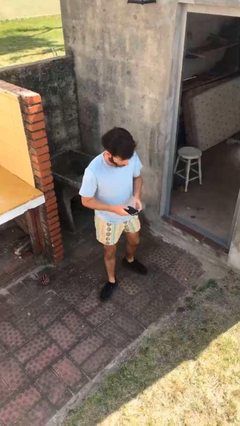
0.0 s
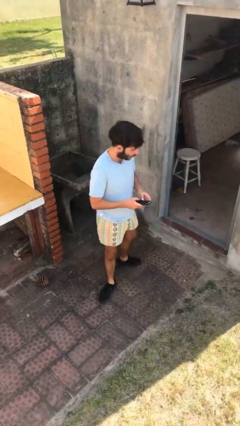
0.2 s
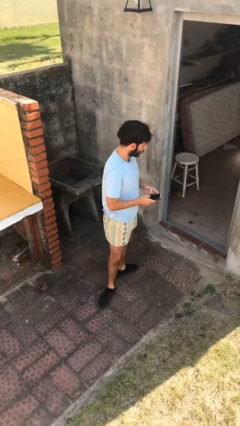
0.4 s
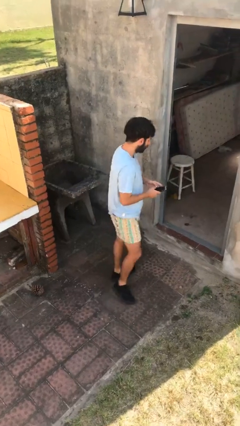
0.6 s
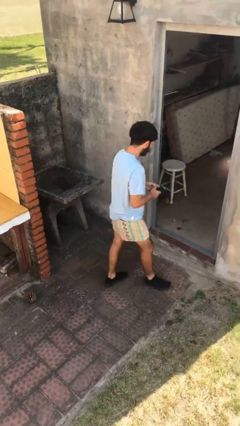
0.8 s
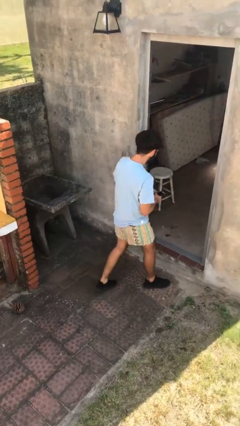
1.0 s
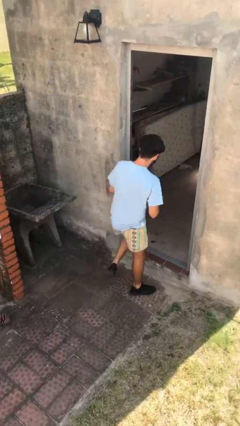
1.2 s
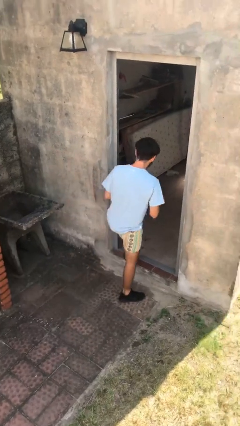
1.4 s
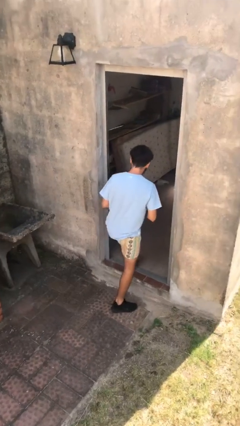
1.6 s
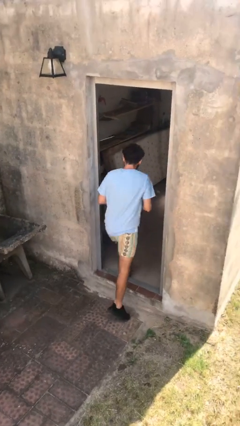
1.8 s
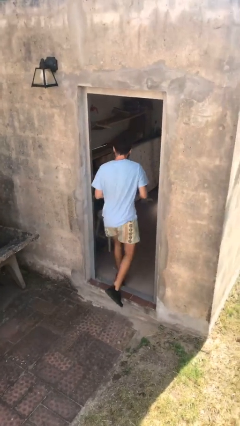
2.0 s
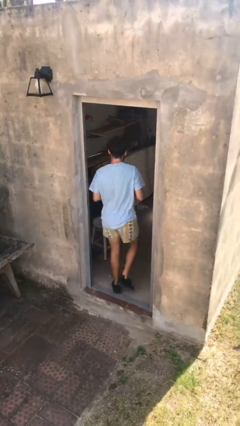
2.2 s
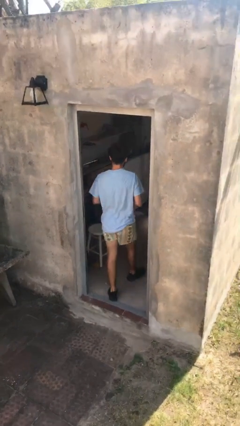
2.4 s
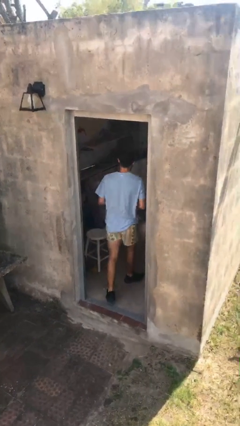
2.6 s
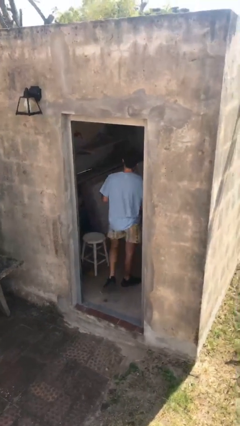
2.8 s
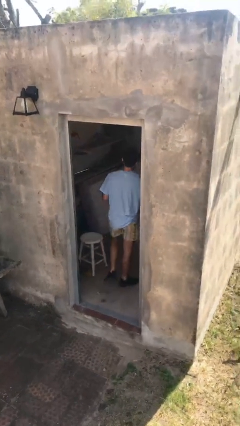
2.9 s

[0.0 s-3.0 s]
person exits scene through structure

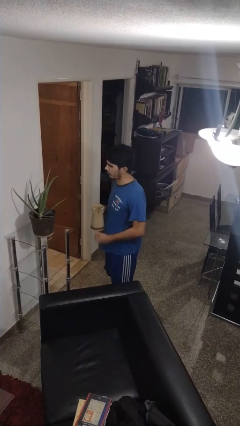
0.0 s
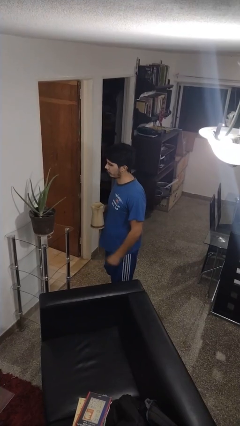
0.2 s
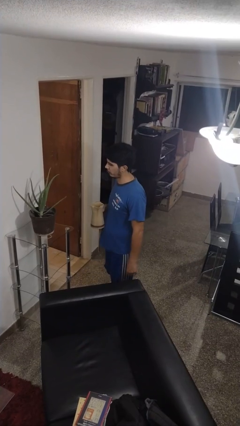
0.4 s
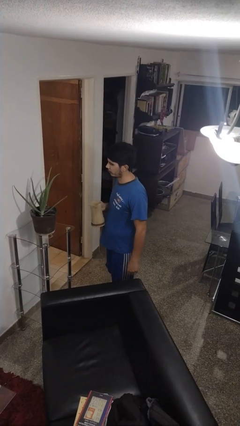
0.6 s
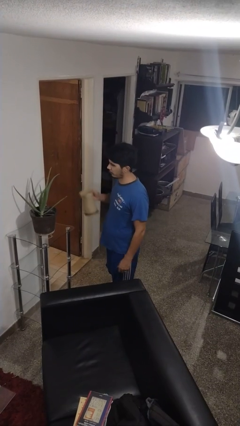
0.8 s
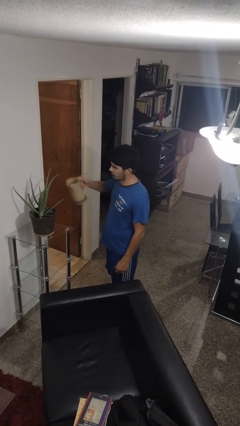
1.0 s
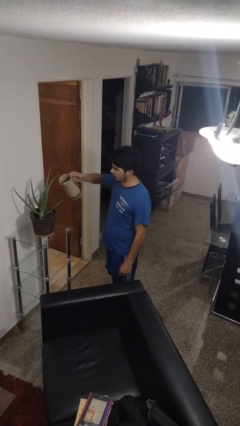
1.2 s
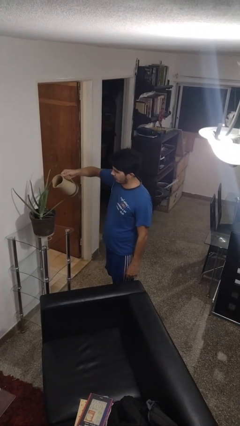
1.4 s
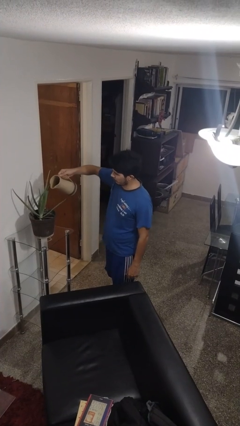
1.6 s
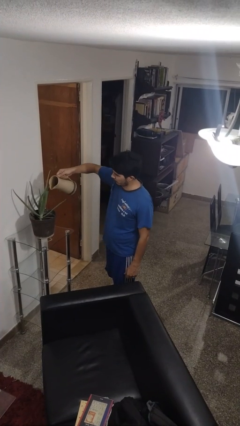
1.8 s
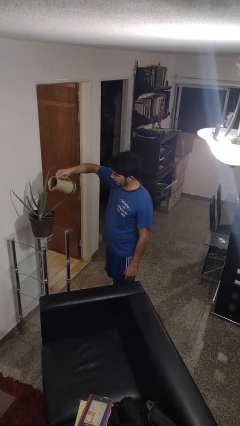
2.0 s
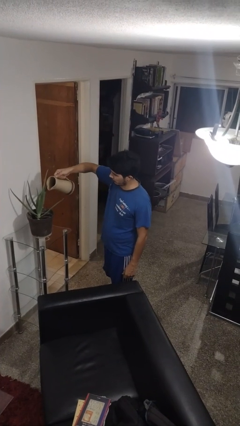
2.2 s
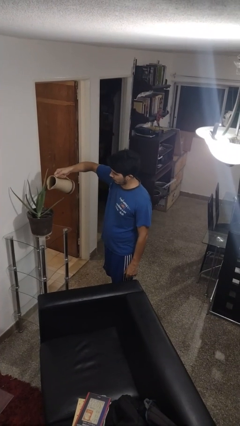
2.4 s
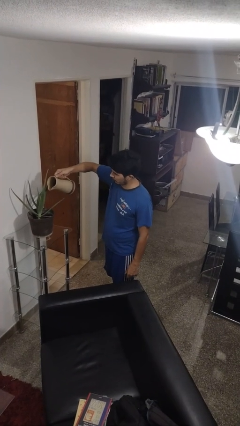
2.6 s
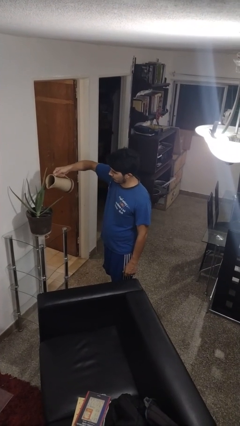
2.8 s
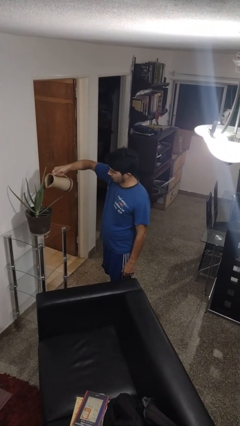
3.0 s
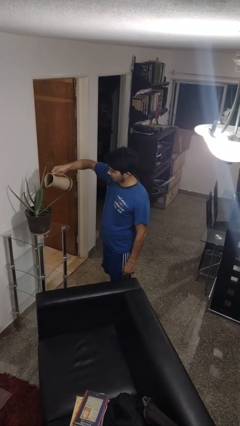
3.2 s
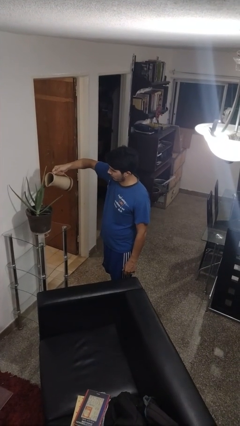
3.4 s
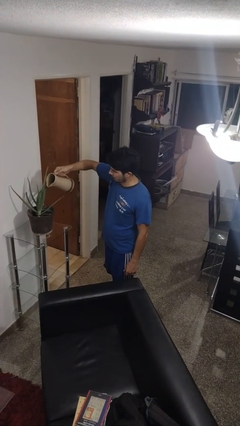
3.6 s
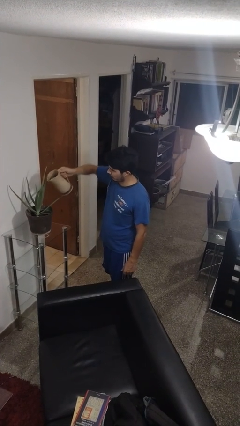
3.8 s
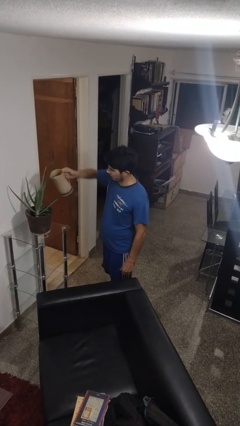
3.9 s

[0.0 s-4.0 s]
person waters houseplant

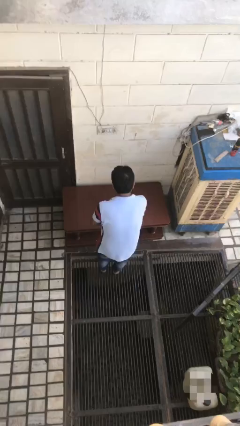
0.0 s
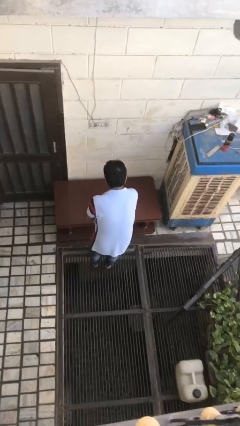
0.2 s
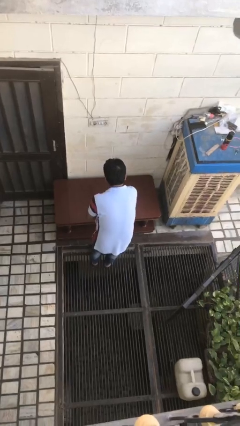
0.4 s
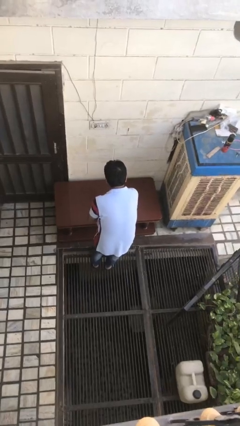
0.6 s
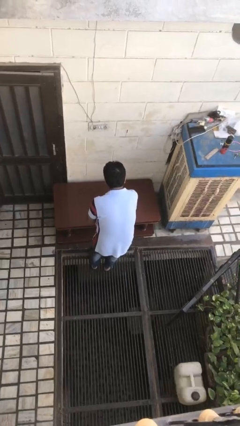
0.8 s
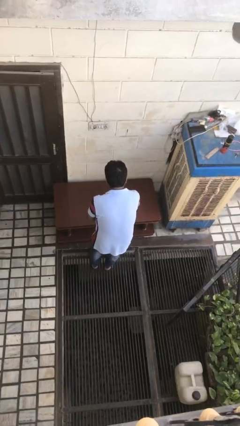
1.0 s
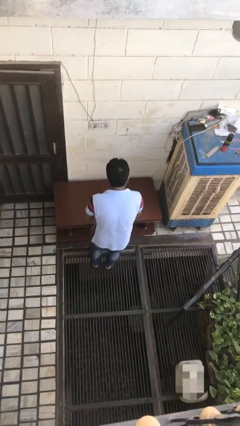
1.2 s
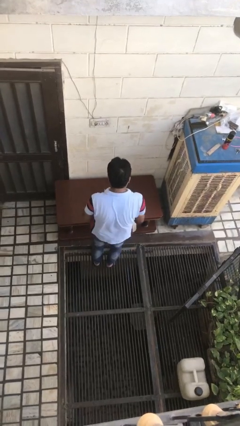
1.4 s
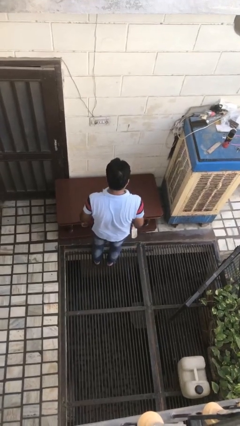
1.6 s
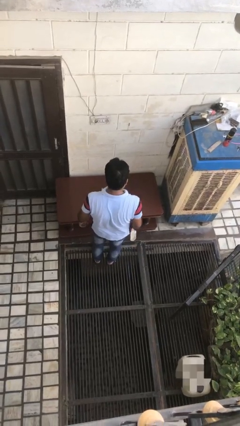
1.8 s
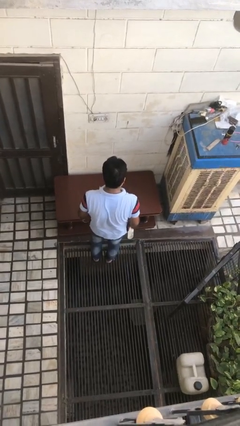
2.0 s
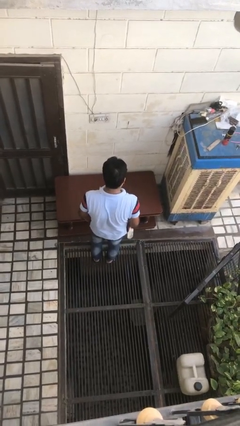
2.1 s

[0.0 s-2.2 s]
person sprays from bottle

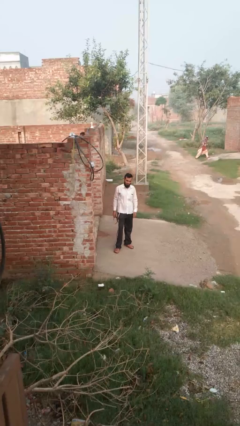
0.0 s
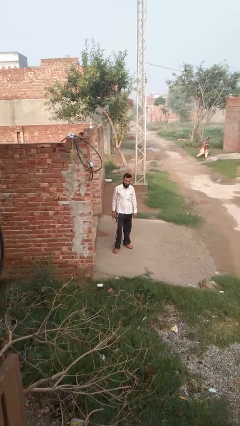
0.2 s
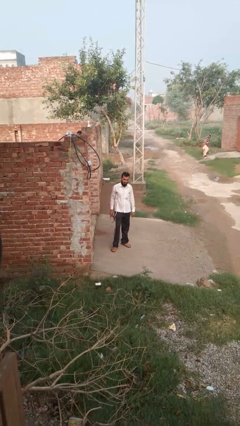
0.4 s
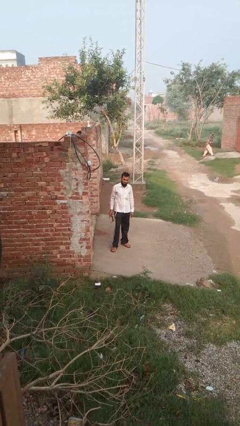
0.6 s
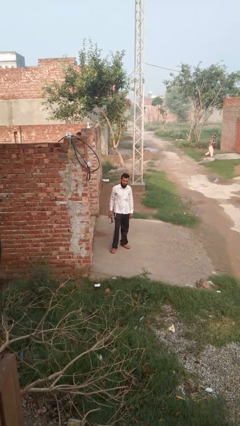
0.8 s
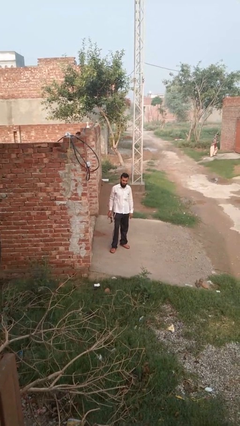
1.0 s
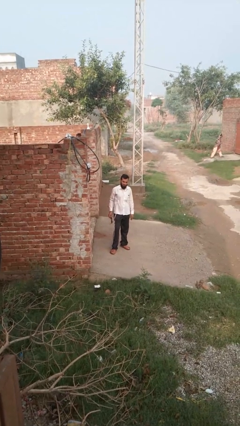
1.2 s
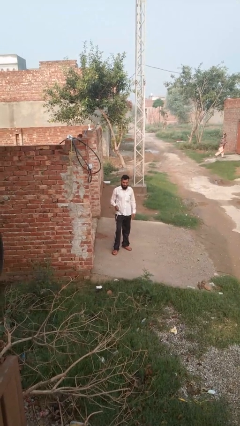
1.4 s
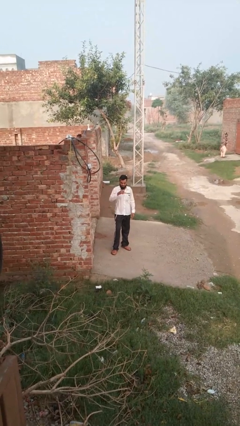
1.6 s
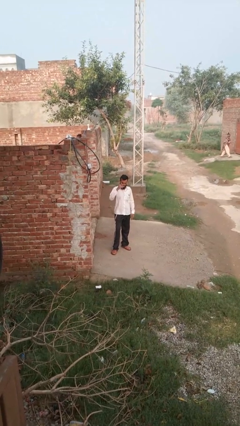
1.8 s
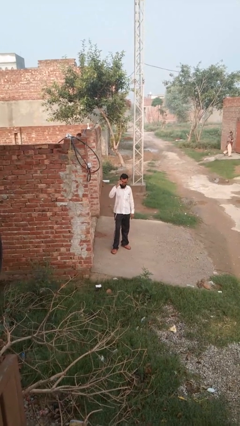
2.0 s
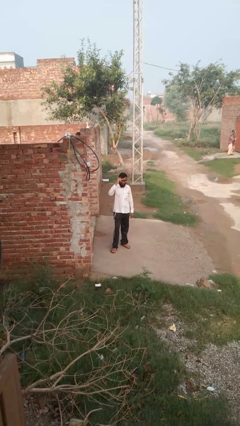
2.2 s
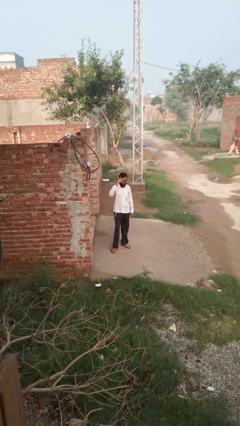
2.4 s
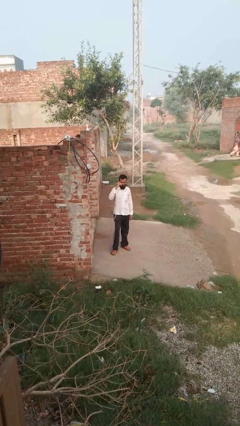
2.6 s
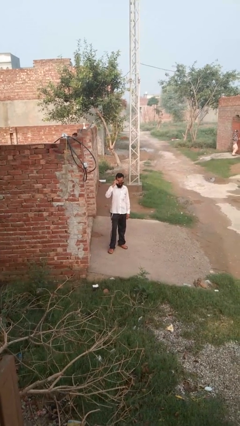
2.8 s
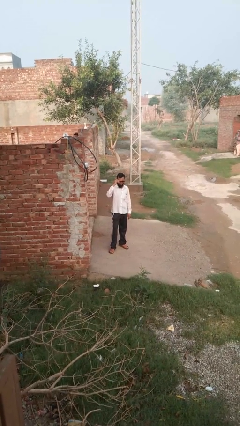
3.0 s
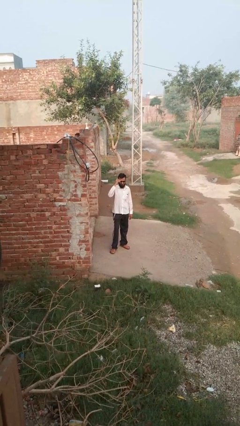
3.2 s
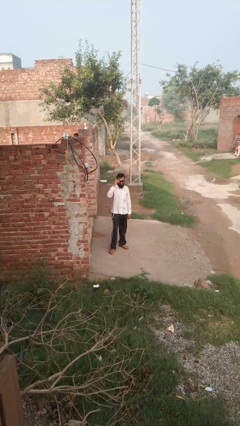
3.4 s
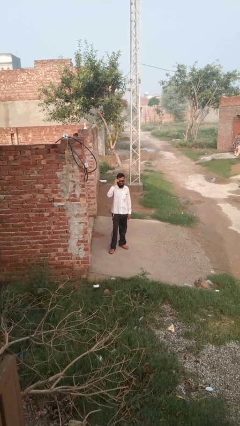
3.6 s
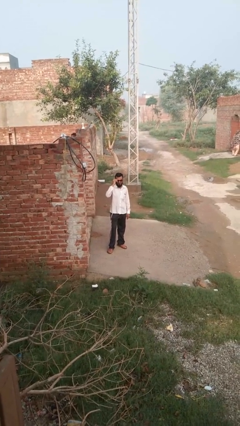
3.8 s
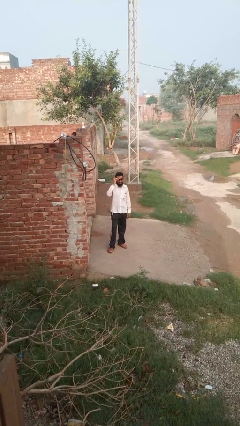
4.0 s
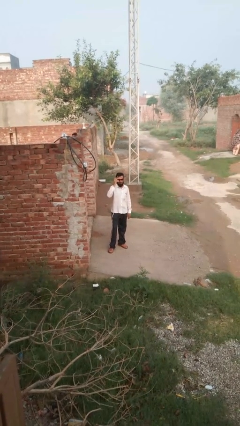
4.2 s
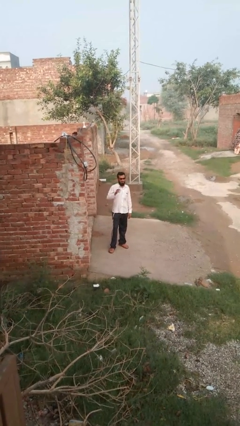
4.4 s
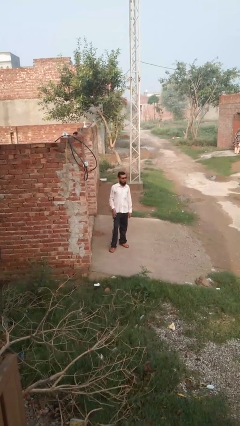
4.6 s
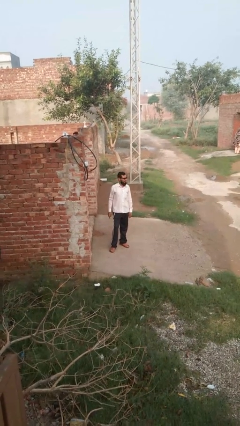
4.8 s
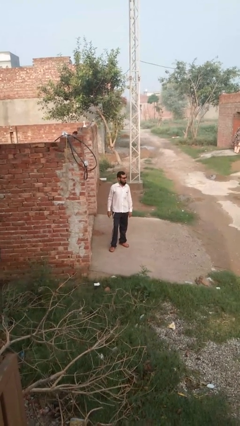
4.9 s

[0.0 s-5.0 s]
person puts on glasses

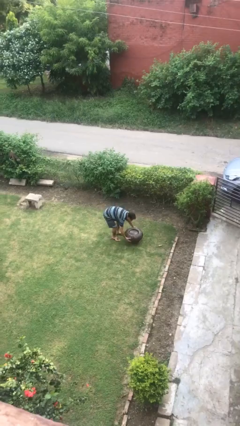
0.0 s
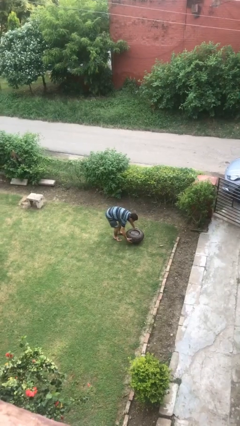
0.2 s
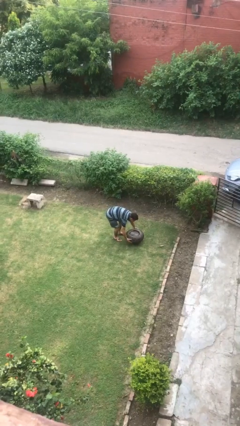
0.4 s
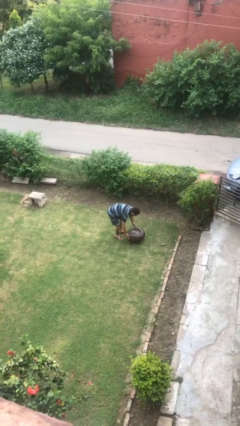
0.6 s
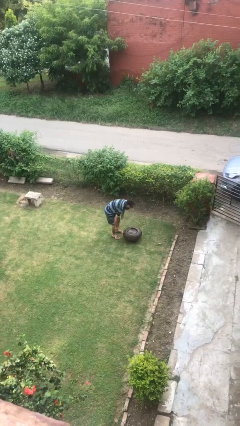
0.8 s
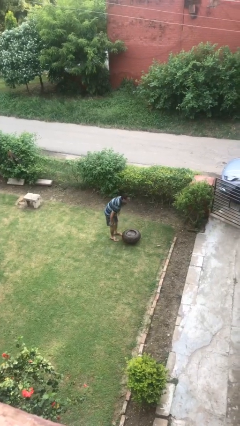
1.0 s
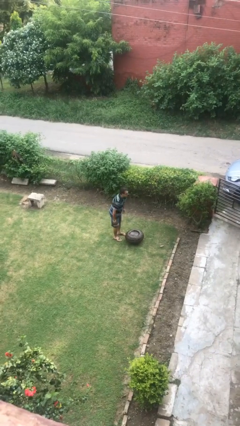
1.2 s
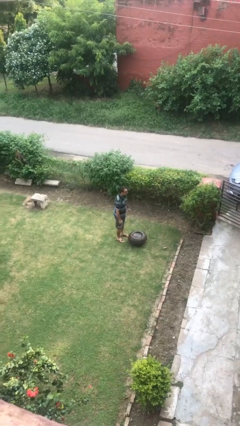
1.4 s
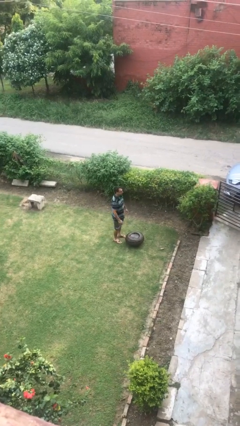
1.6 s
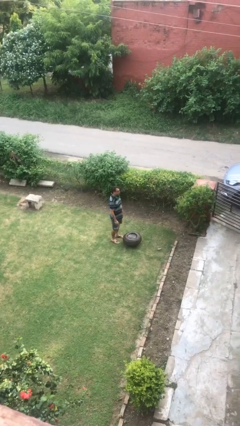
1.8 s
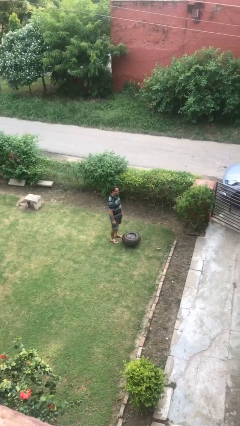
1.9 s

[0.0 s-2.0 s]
person puts down object on floor

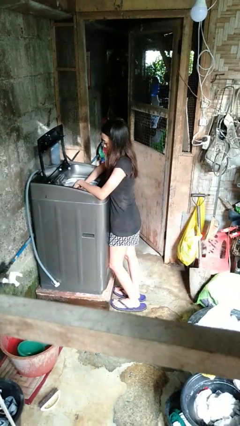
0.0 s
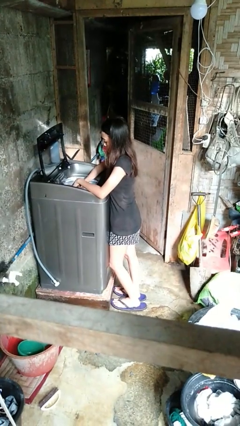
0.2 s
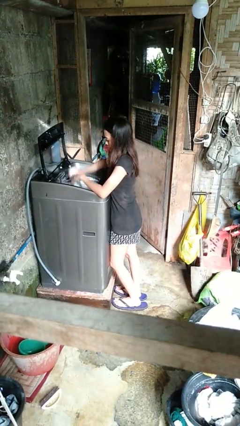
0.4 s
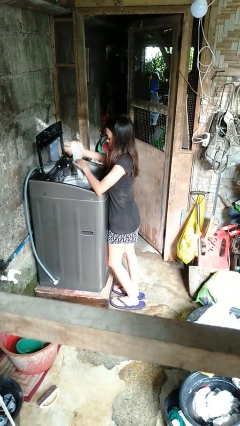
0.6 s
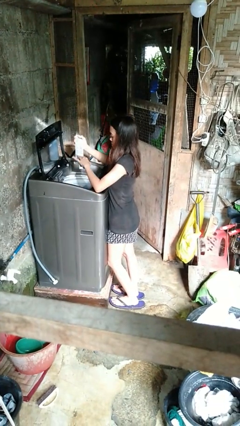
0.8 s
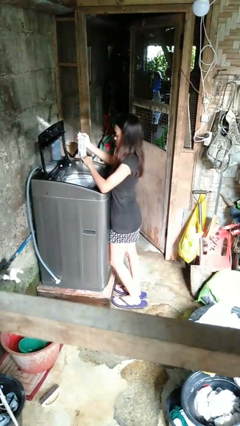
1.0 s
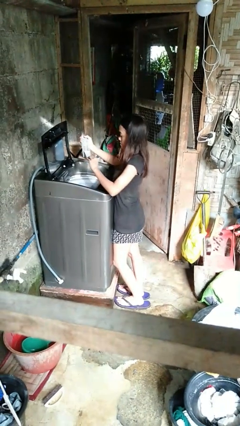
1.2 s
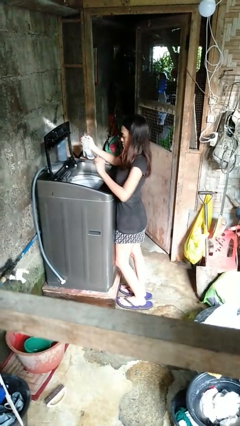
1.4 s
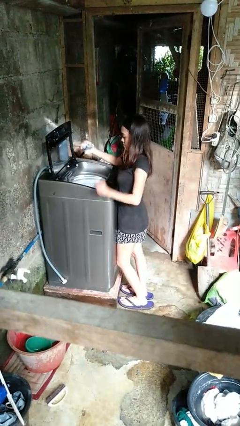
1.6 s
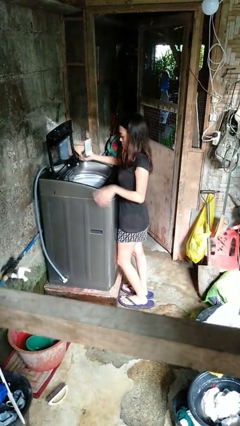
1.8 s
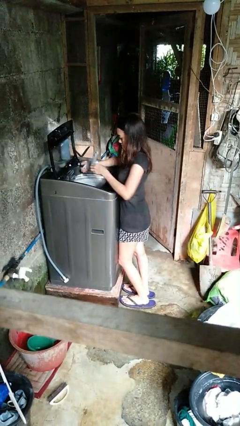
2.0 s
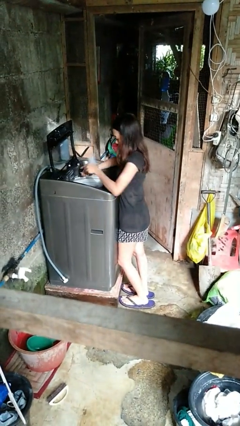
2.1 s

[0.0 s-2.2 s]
person cleans dryer lint trap
